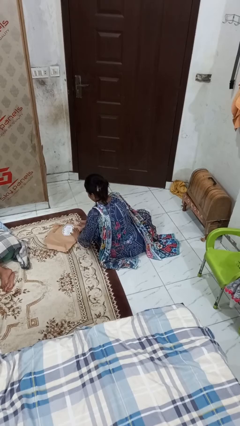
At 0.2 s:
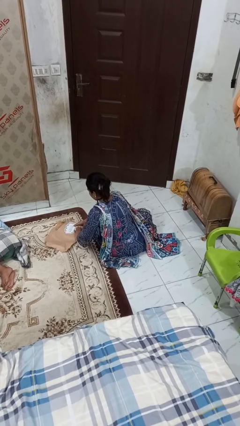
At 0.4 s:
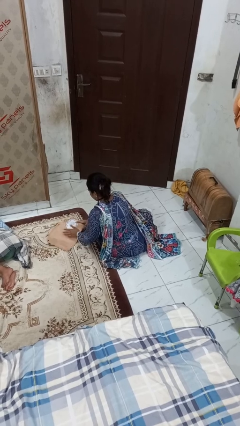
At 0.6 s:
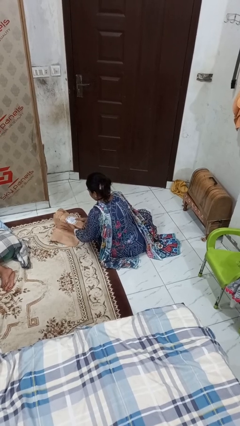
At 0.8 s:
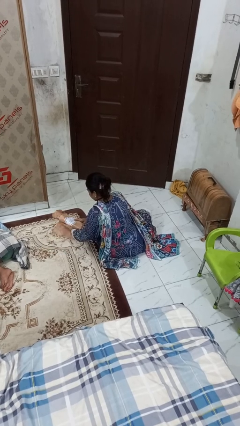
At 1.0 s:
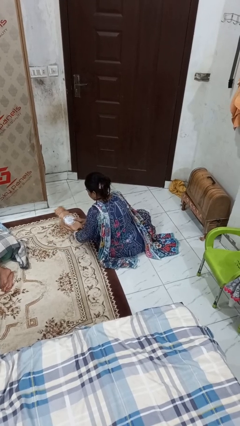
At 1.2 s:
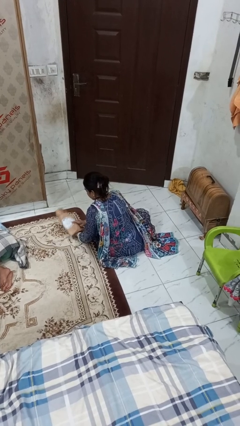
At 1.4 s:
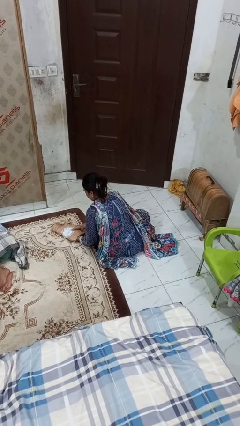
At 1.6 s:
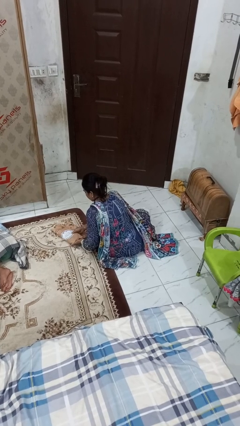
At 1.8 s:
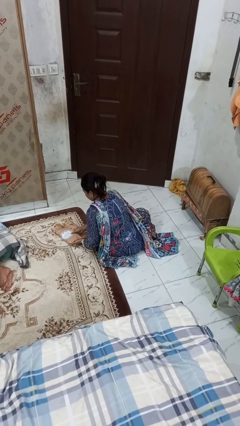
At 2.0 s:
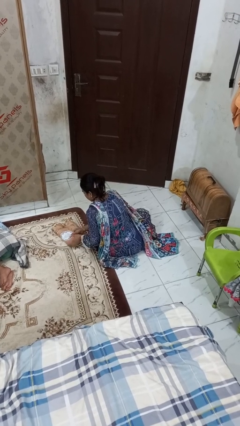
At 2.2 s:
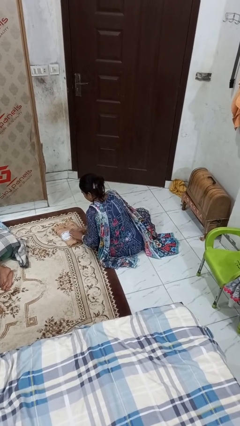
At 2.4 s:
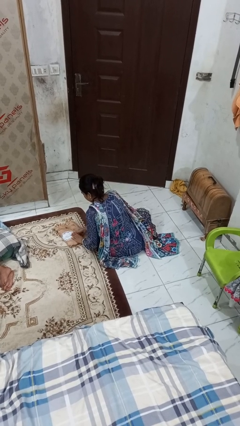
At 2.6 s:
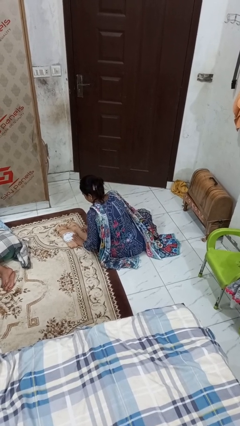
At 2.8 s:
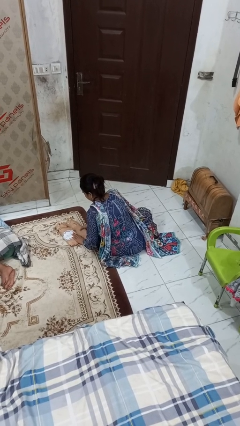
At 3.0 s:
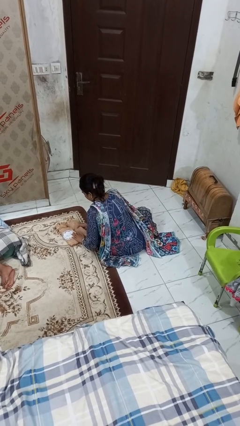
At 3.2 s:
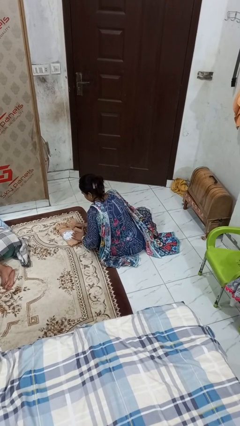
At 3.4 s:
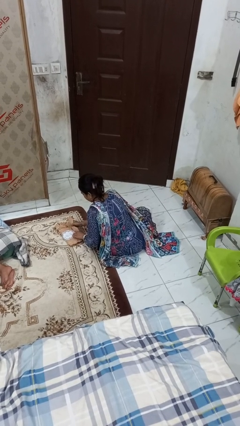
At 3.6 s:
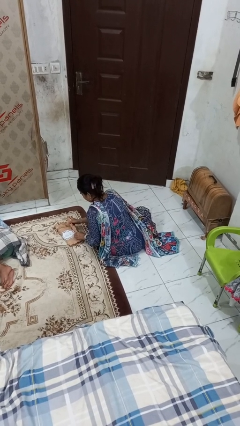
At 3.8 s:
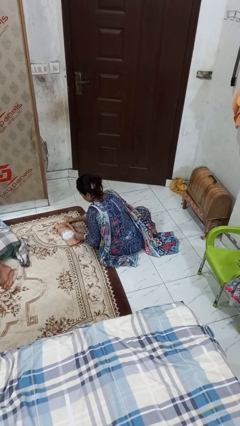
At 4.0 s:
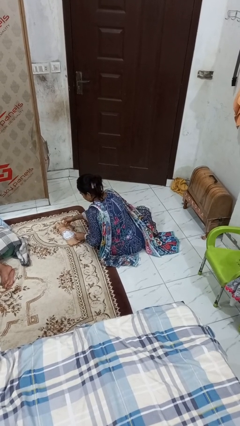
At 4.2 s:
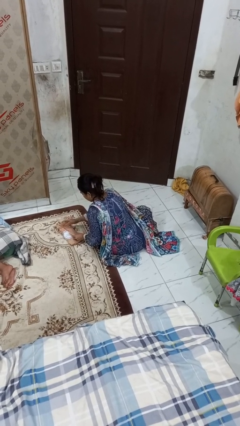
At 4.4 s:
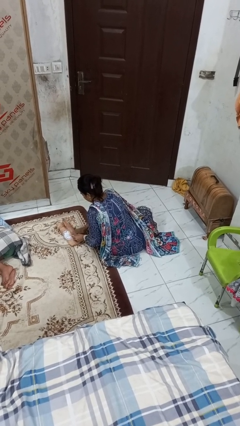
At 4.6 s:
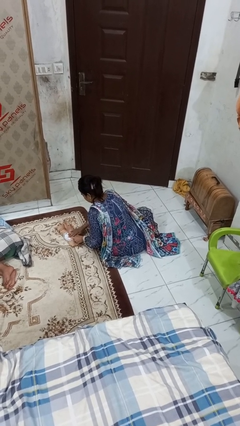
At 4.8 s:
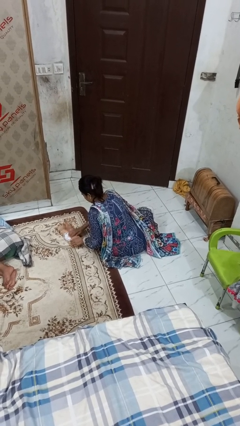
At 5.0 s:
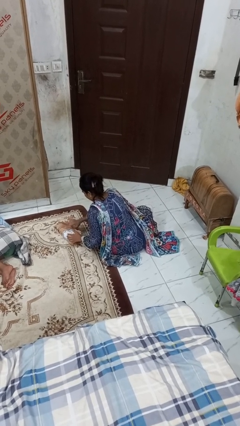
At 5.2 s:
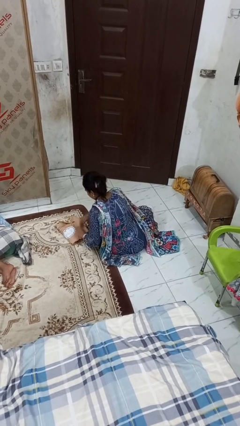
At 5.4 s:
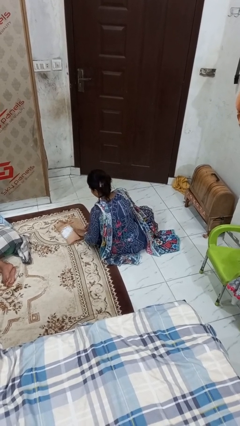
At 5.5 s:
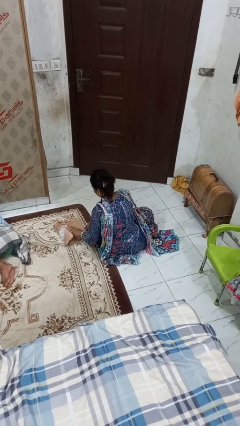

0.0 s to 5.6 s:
person wraps box

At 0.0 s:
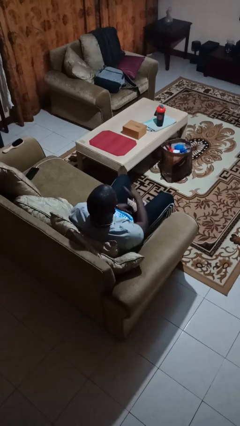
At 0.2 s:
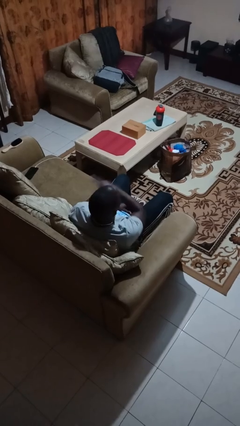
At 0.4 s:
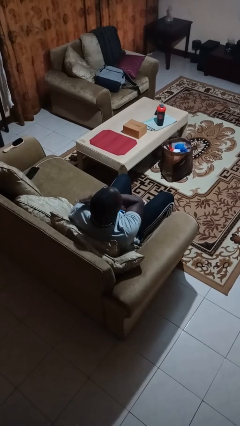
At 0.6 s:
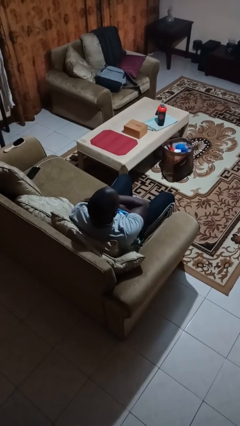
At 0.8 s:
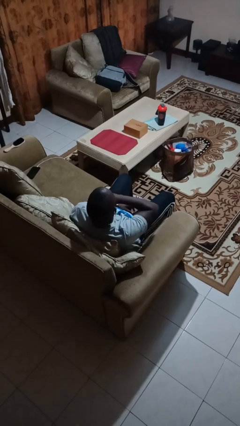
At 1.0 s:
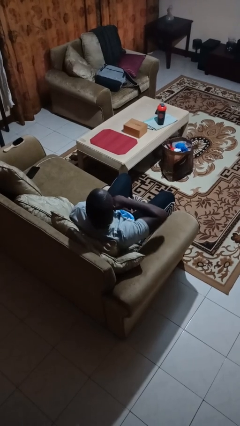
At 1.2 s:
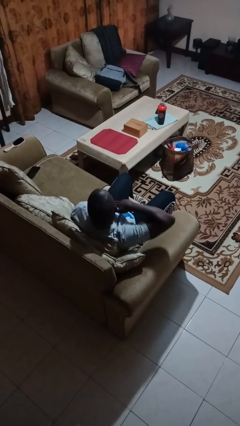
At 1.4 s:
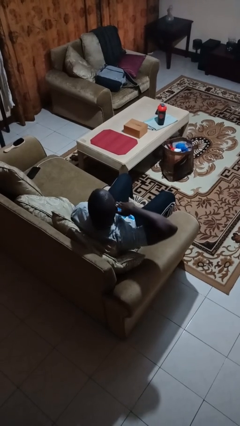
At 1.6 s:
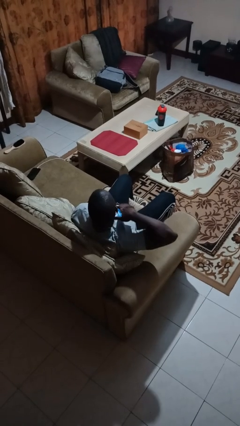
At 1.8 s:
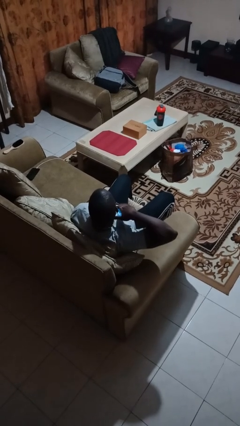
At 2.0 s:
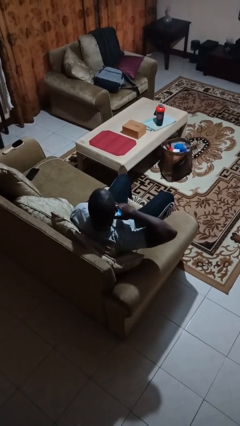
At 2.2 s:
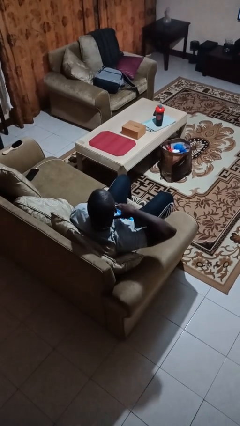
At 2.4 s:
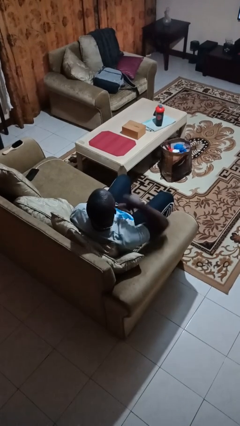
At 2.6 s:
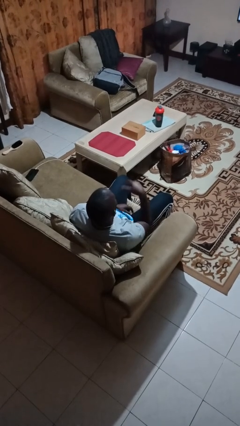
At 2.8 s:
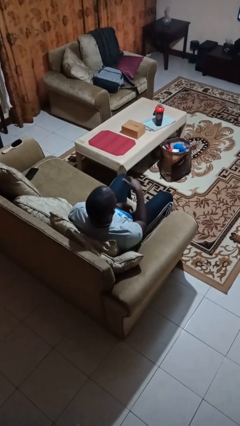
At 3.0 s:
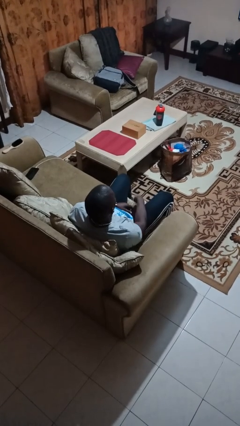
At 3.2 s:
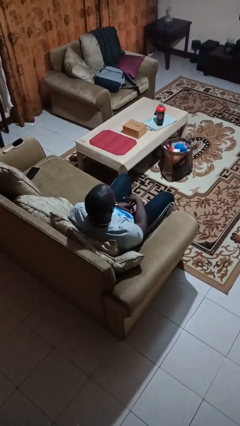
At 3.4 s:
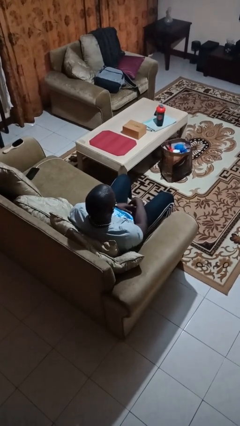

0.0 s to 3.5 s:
person gestures cut

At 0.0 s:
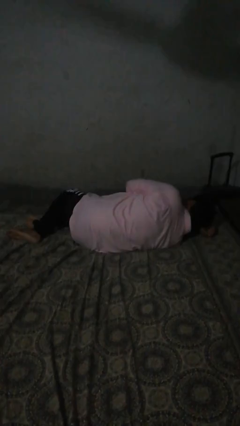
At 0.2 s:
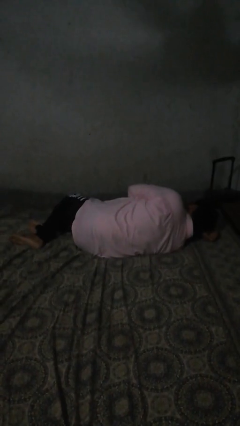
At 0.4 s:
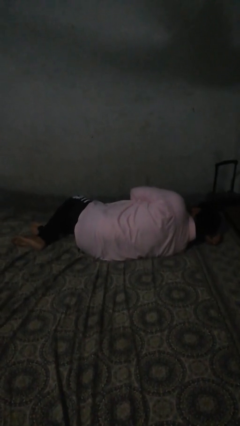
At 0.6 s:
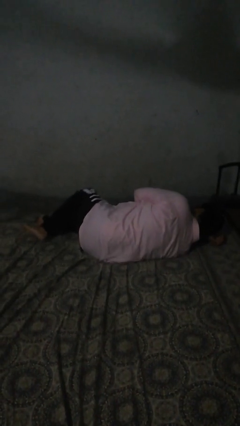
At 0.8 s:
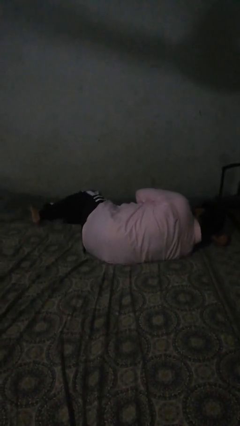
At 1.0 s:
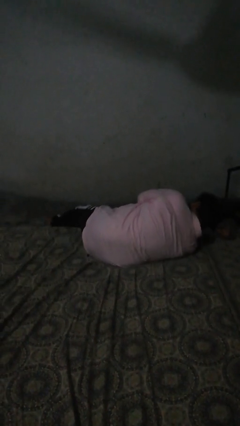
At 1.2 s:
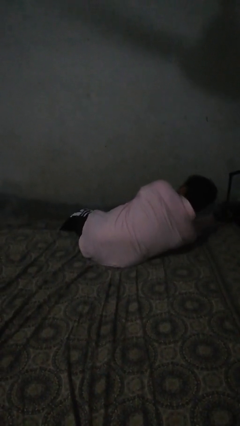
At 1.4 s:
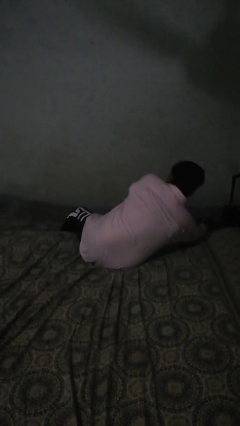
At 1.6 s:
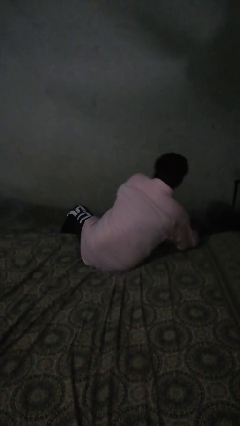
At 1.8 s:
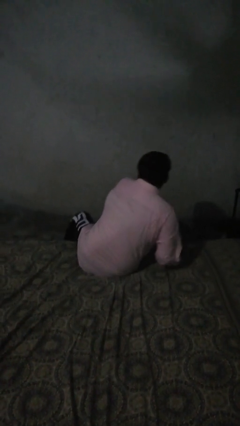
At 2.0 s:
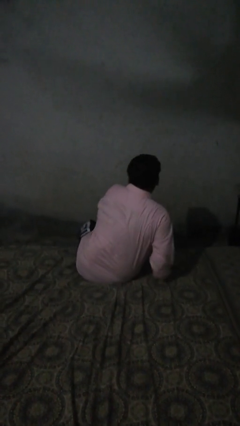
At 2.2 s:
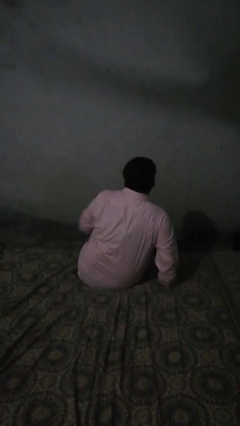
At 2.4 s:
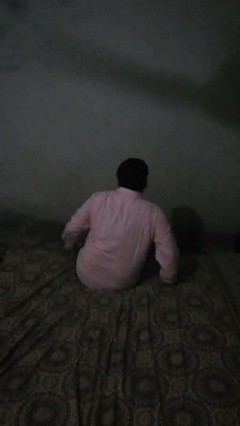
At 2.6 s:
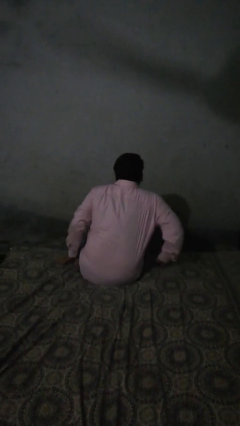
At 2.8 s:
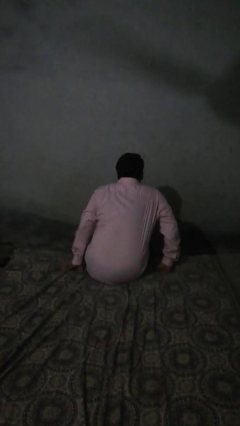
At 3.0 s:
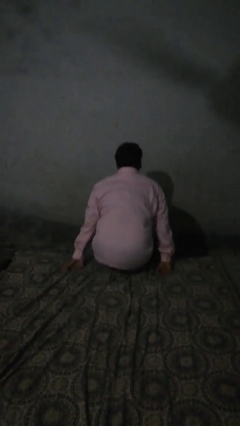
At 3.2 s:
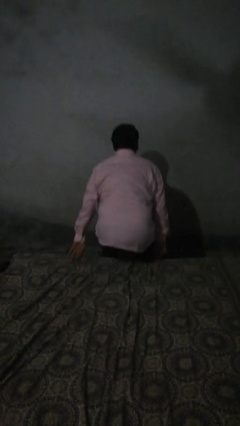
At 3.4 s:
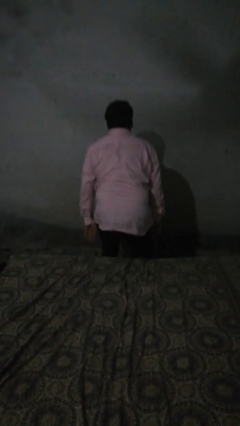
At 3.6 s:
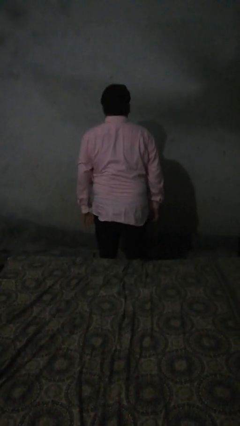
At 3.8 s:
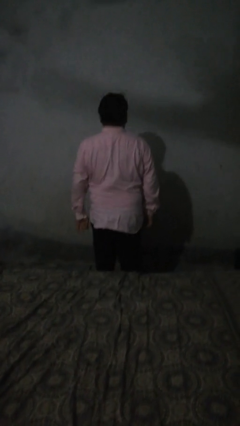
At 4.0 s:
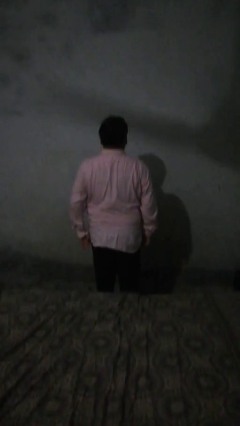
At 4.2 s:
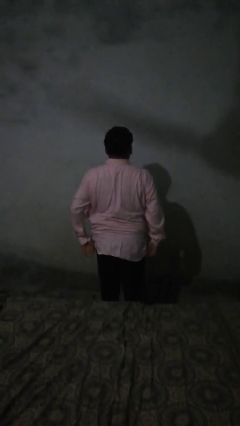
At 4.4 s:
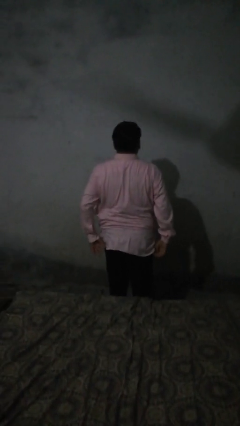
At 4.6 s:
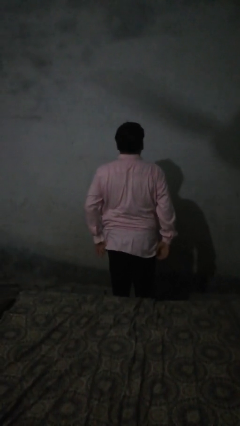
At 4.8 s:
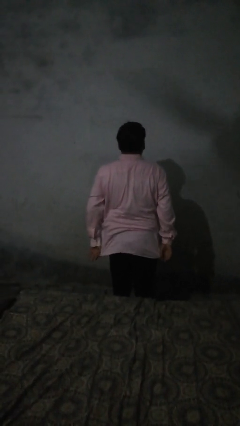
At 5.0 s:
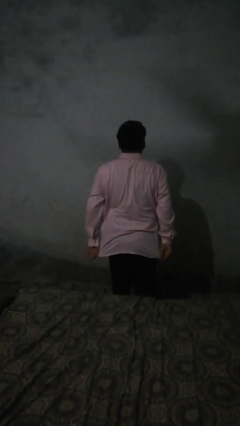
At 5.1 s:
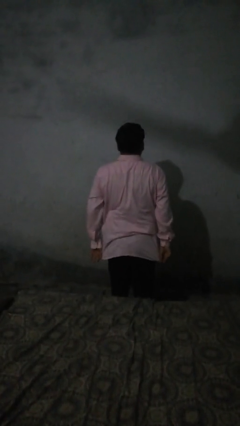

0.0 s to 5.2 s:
person stands up

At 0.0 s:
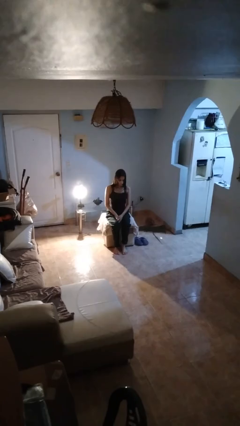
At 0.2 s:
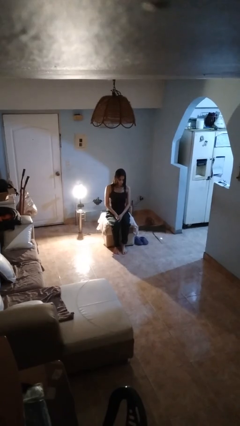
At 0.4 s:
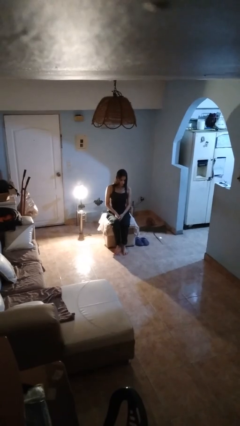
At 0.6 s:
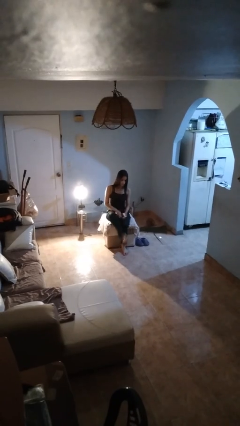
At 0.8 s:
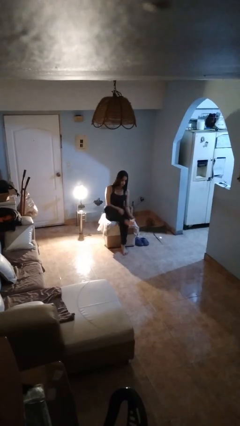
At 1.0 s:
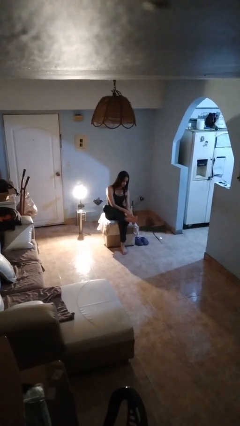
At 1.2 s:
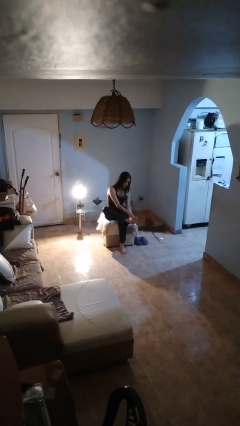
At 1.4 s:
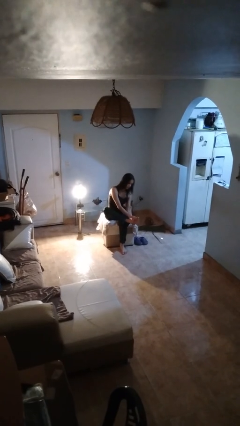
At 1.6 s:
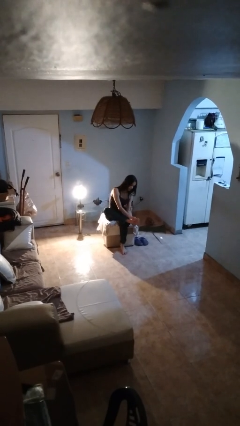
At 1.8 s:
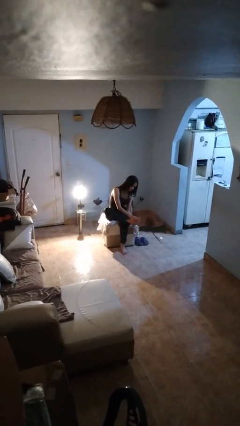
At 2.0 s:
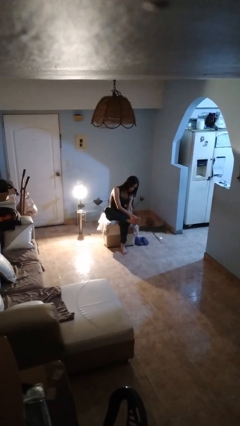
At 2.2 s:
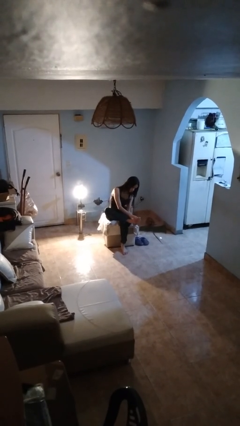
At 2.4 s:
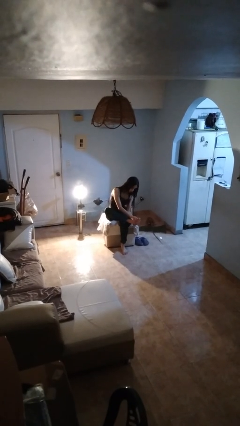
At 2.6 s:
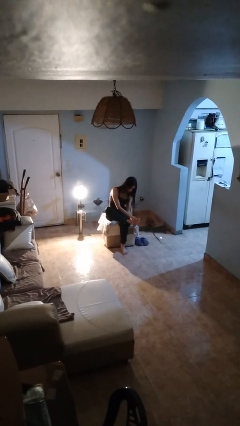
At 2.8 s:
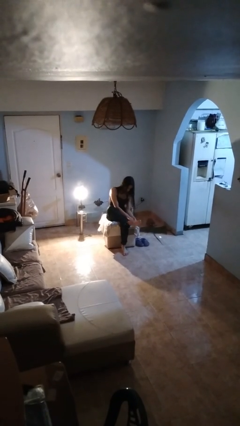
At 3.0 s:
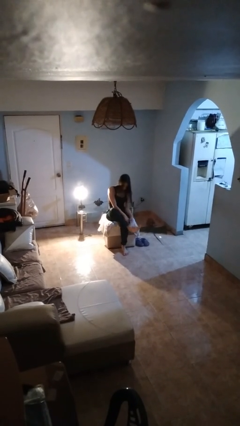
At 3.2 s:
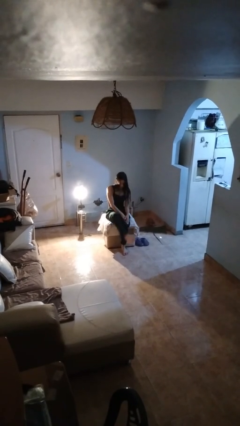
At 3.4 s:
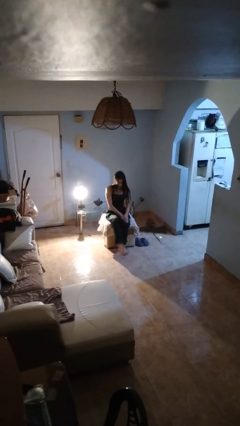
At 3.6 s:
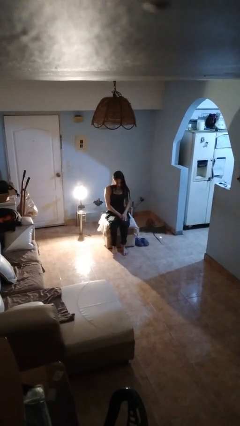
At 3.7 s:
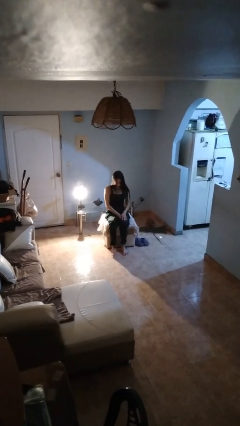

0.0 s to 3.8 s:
person rubs foot
